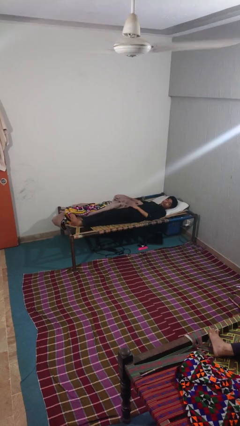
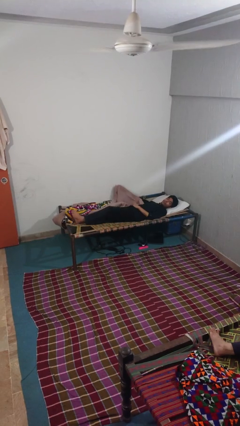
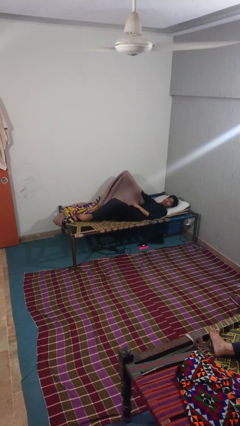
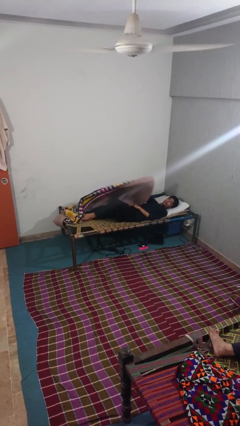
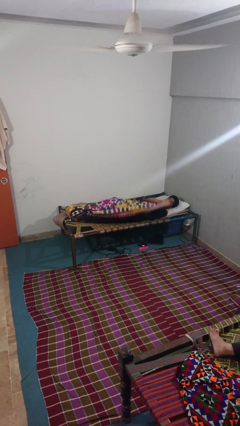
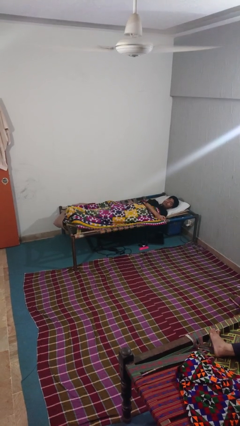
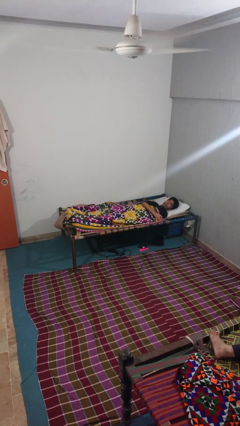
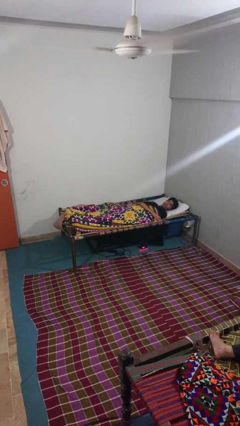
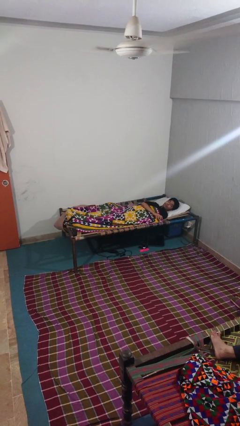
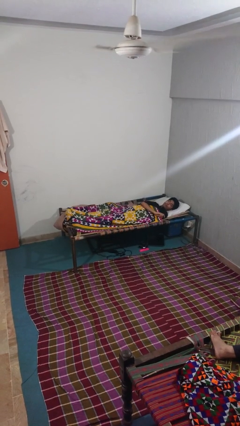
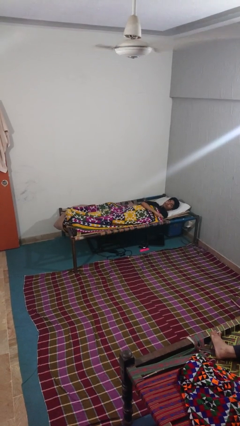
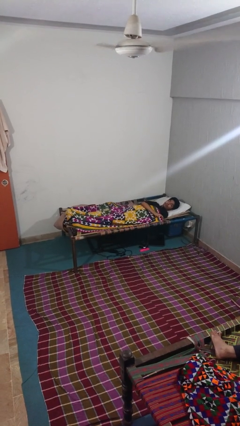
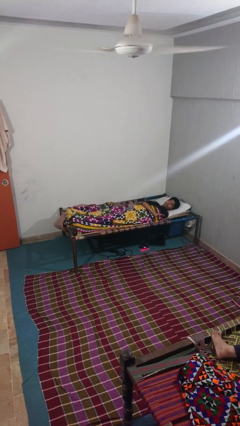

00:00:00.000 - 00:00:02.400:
person covers with bedsheets

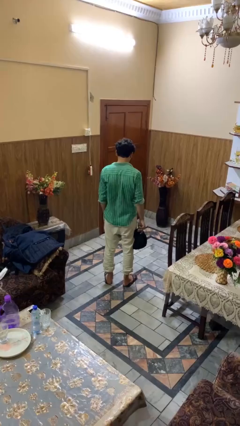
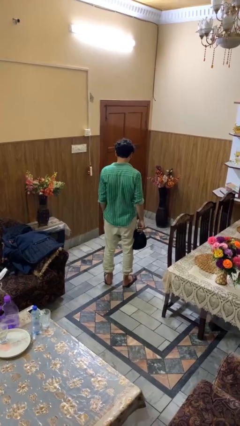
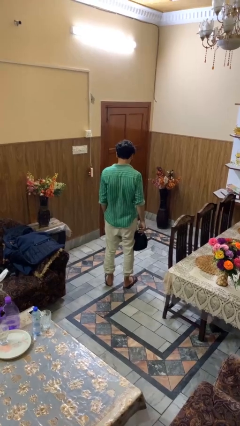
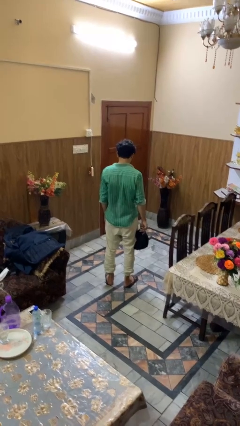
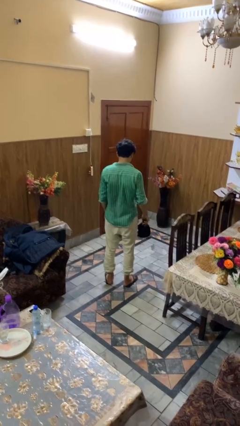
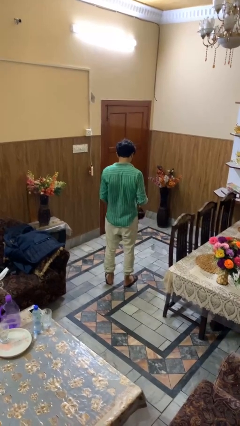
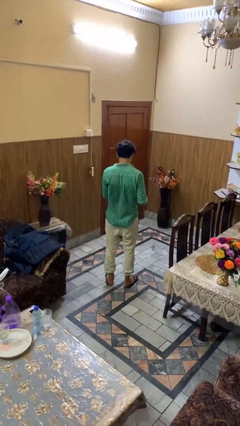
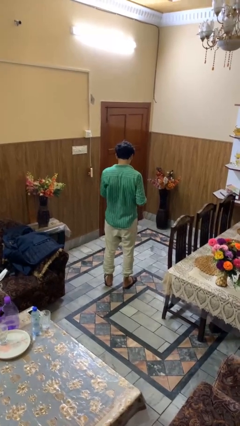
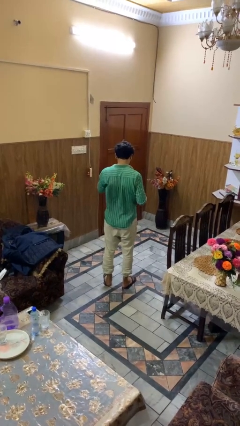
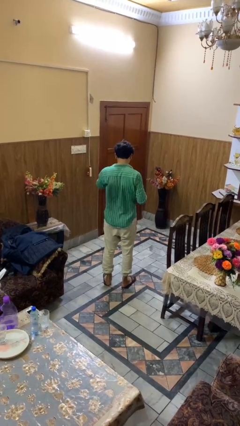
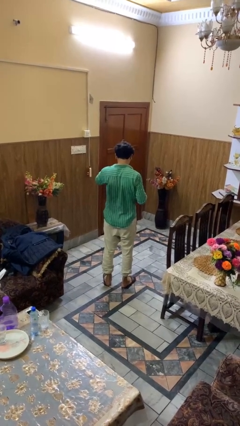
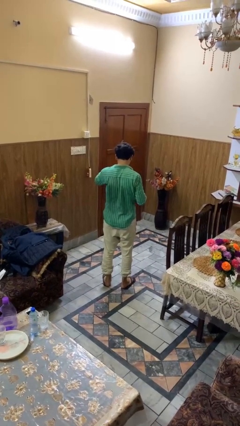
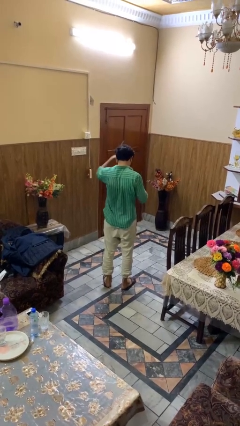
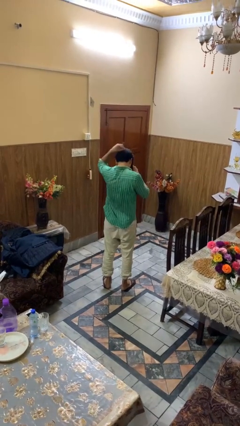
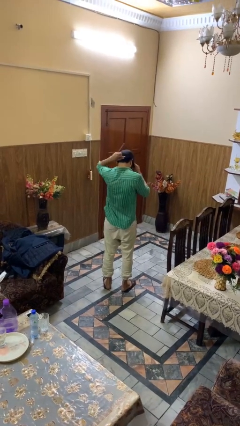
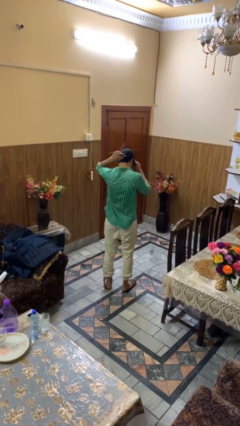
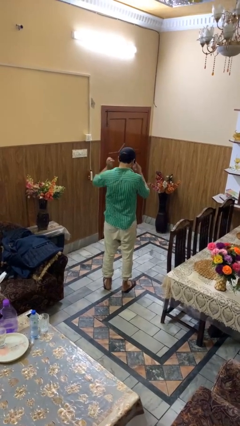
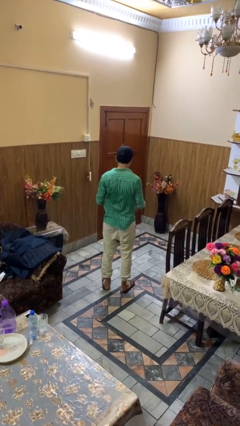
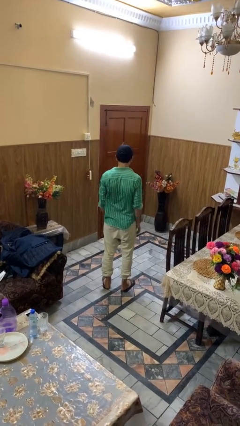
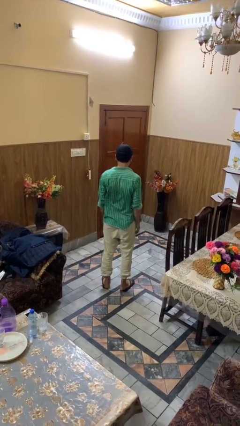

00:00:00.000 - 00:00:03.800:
person puts on hat

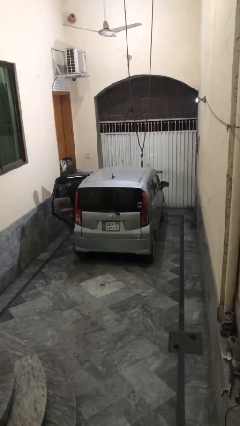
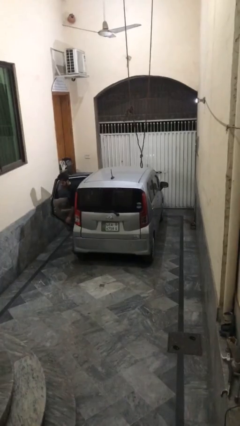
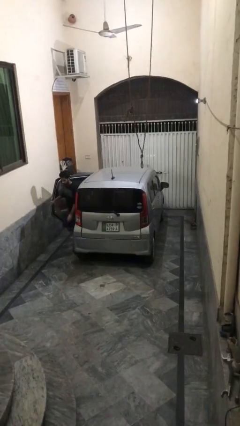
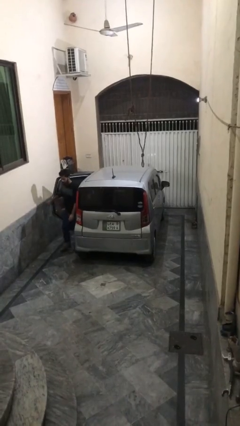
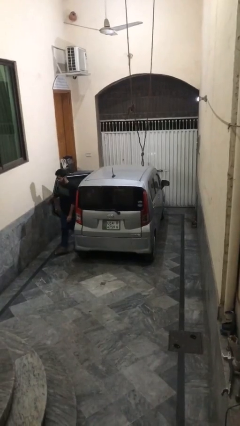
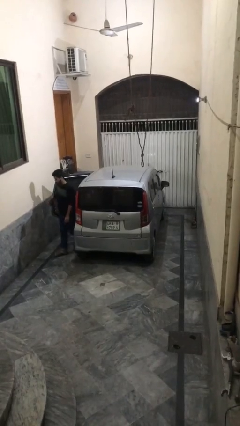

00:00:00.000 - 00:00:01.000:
car drops off person

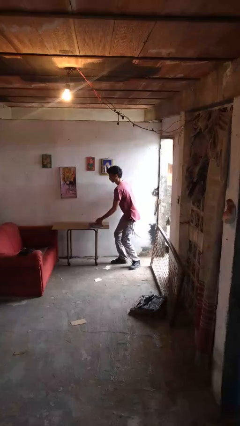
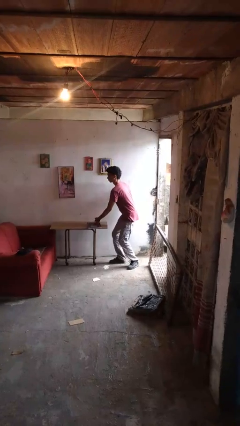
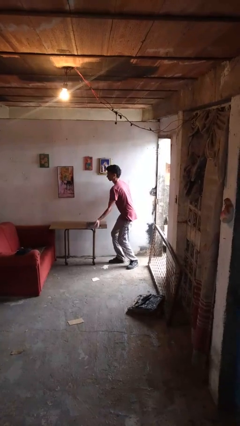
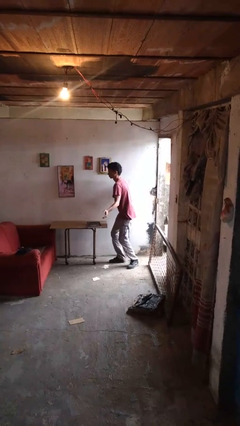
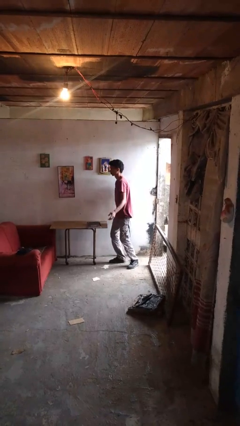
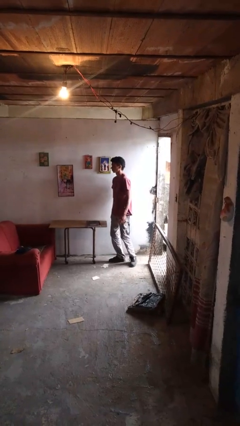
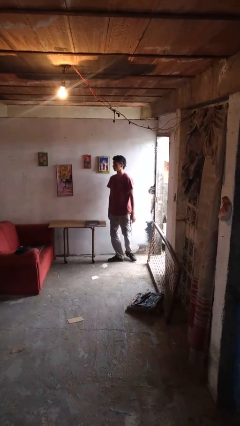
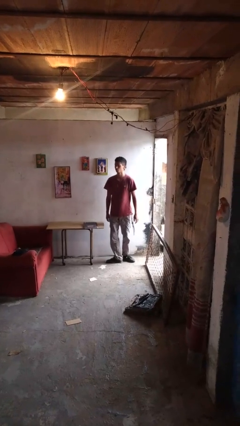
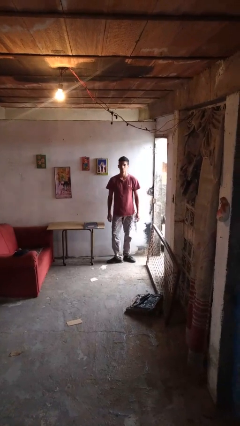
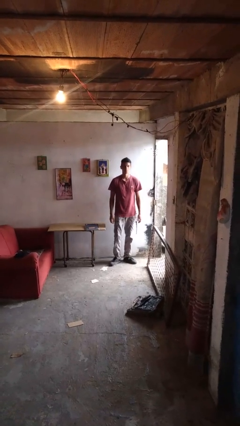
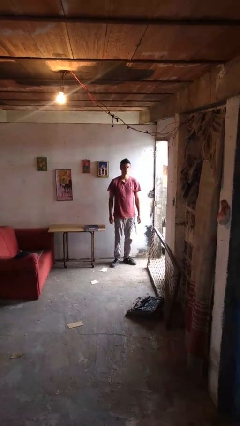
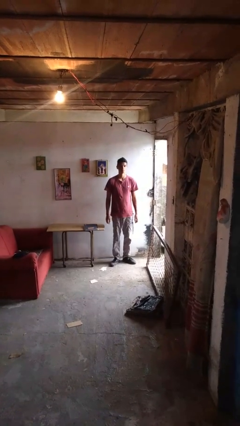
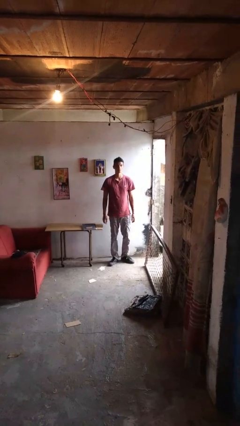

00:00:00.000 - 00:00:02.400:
person drops object

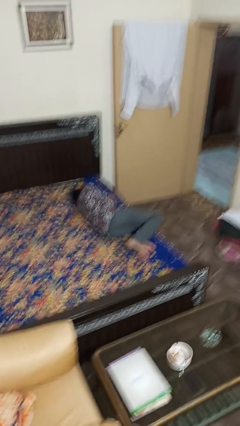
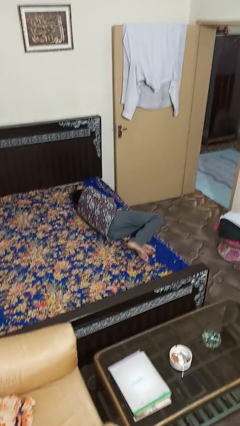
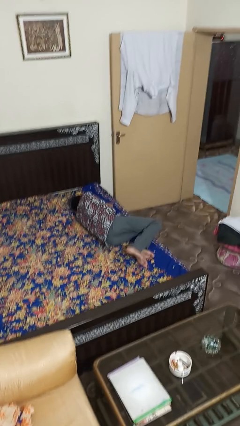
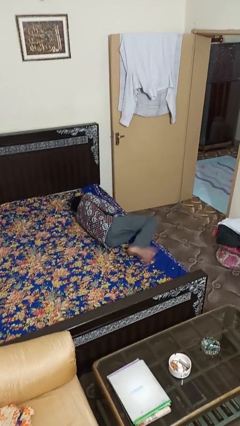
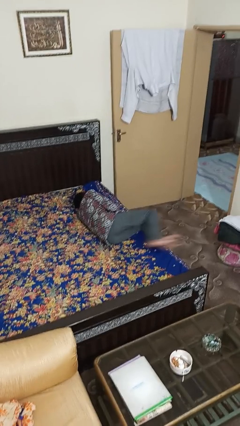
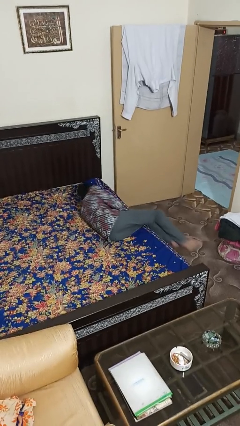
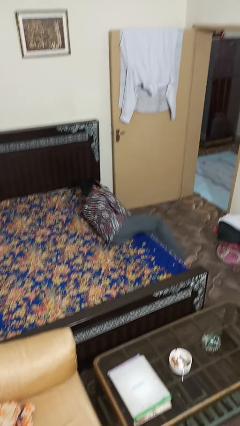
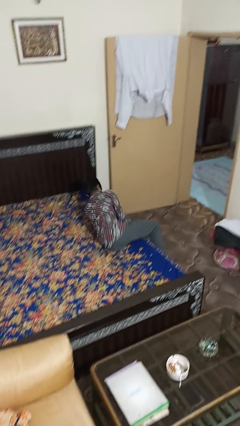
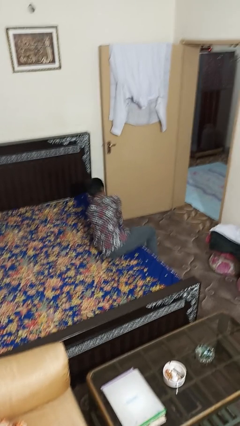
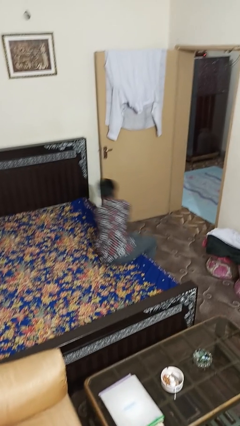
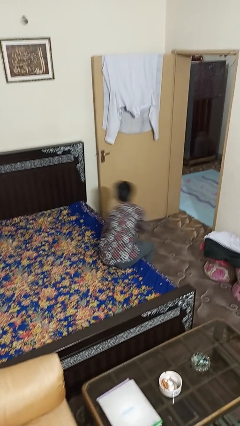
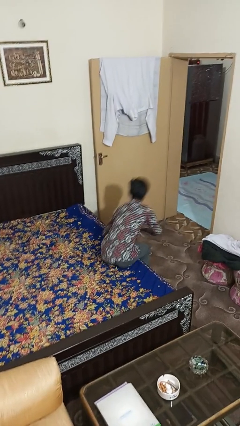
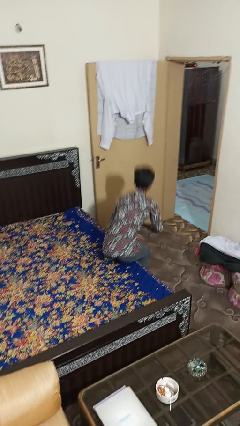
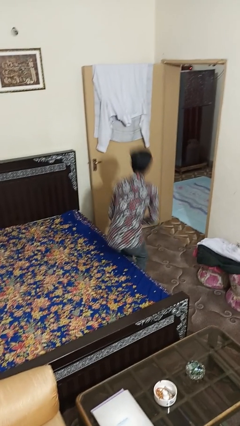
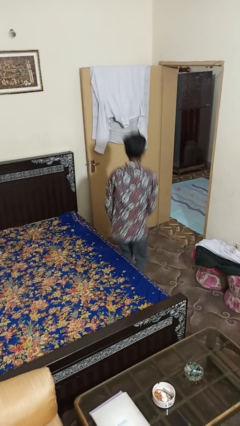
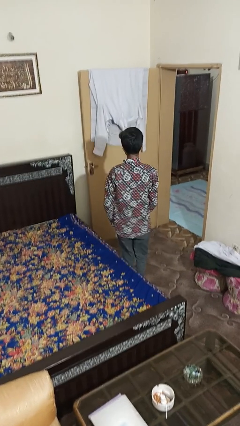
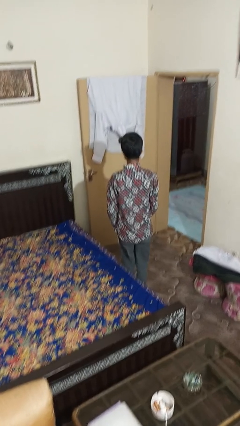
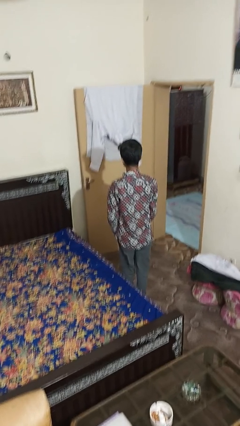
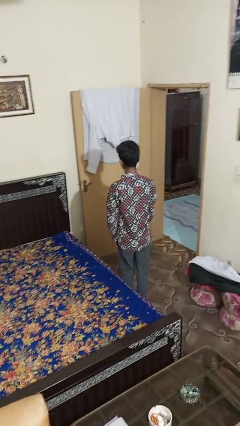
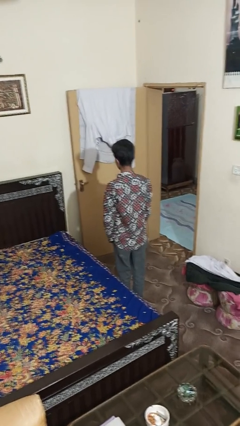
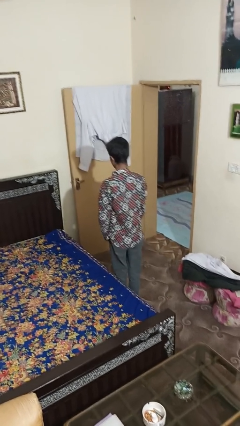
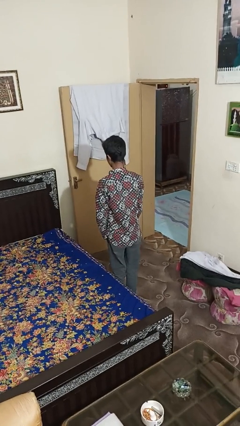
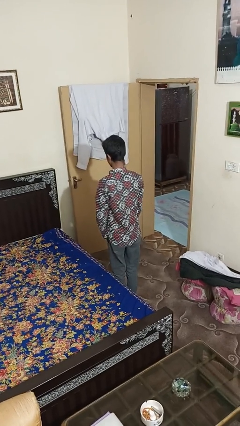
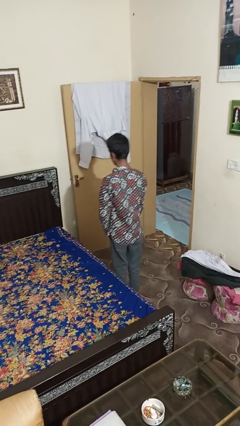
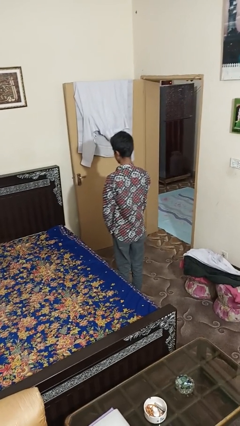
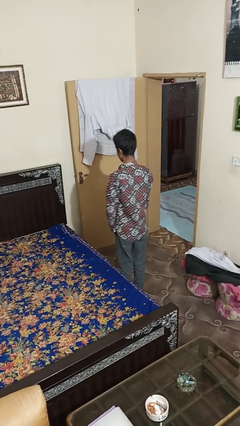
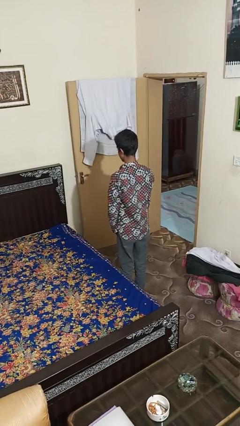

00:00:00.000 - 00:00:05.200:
person stands up

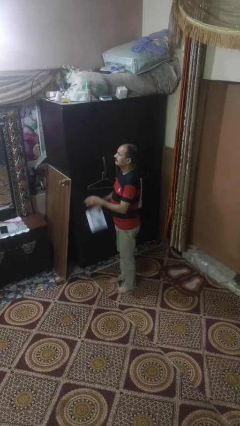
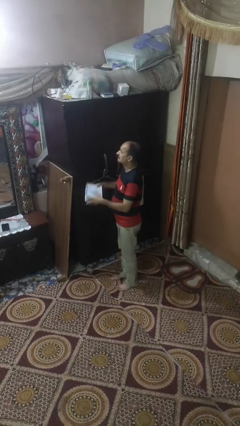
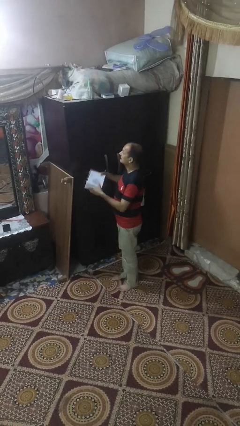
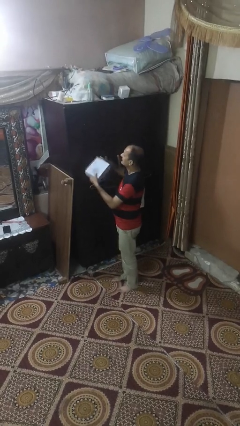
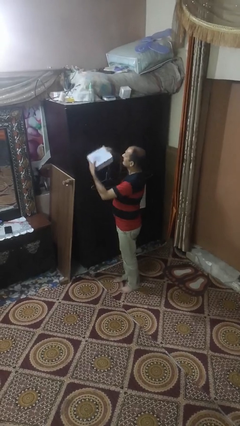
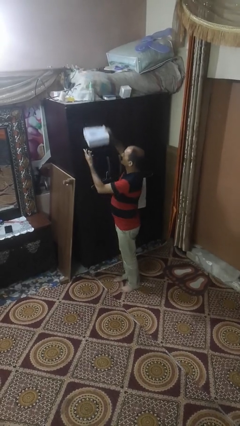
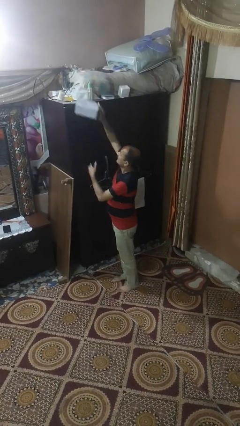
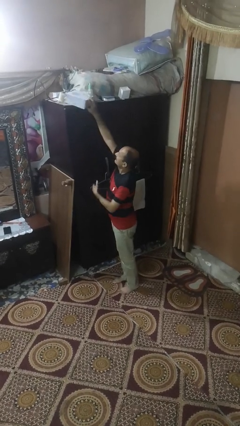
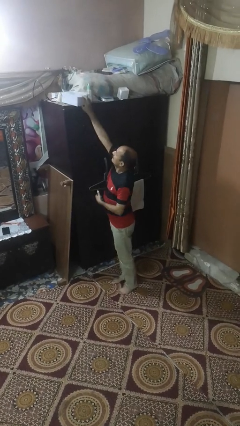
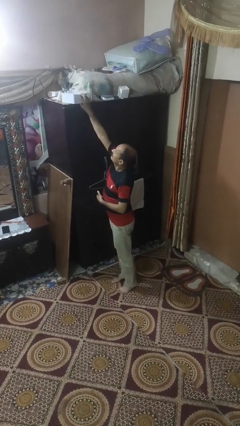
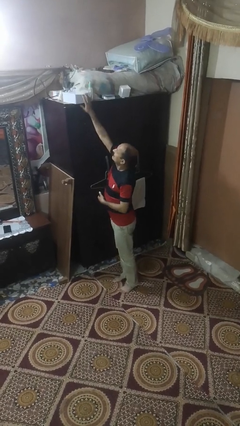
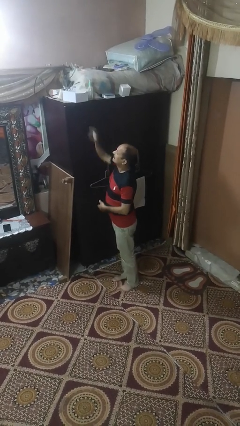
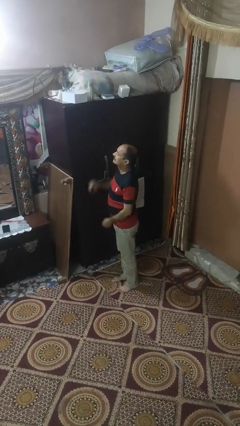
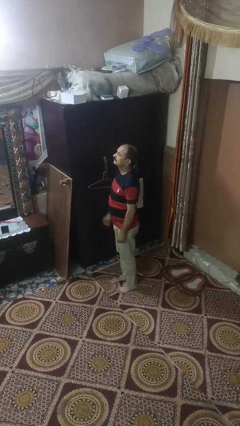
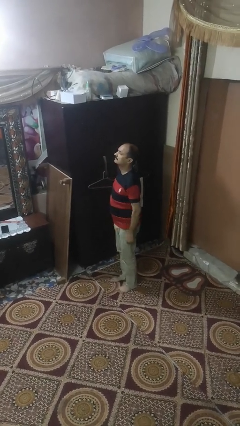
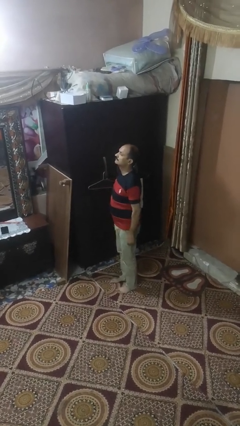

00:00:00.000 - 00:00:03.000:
person picks up object from shelf
